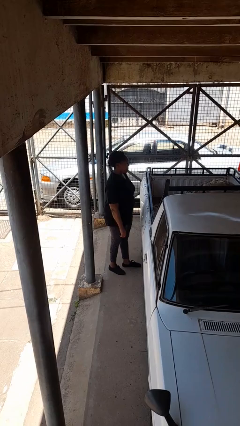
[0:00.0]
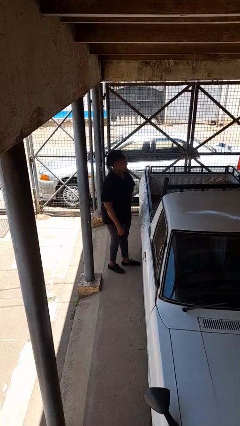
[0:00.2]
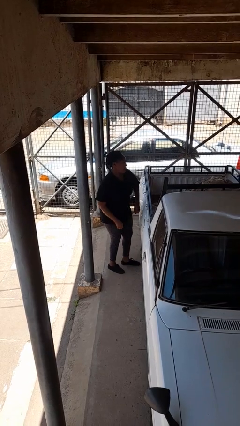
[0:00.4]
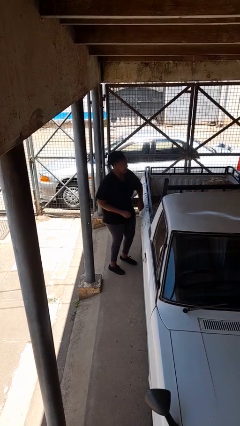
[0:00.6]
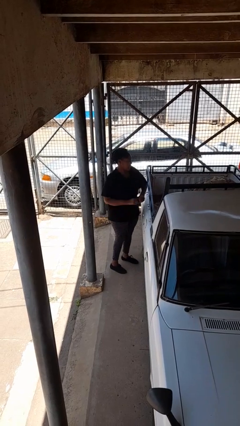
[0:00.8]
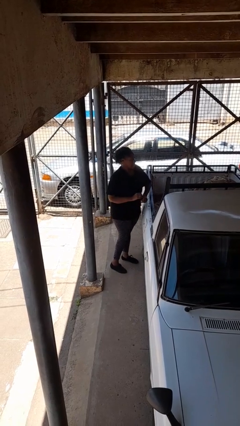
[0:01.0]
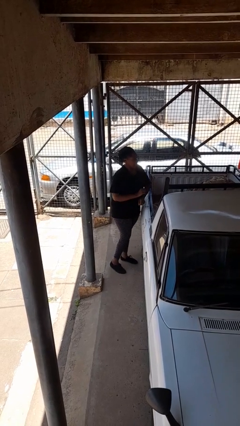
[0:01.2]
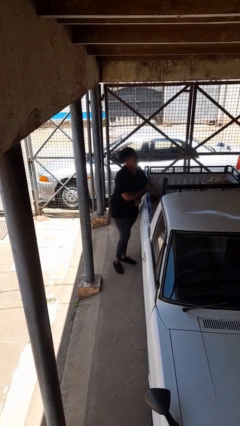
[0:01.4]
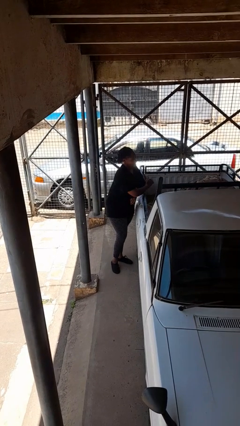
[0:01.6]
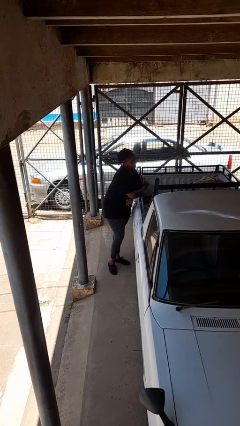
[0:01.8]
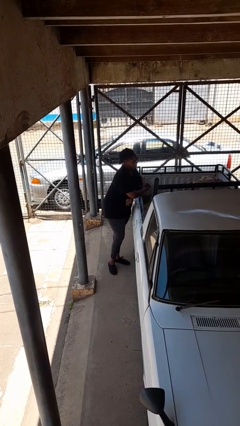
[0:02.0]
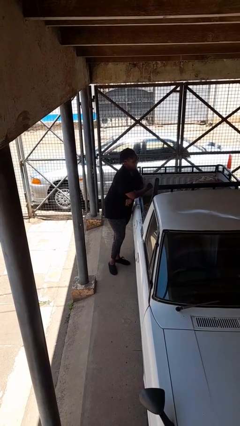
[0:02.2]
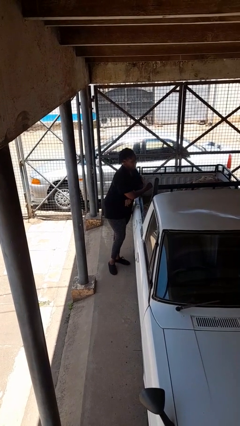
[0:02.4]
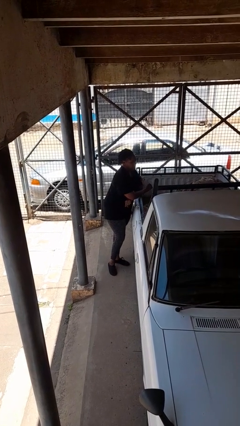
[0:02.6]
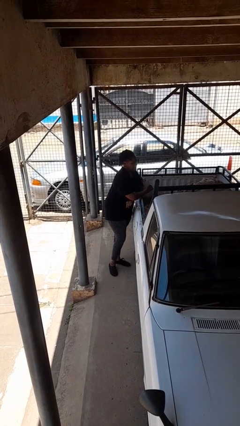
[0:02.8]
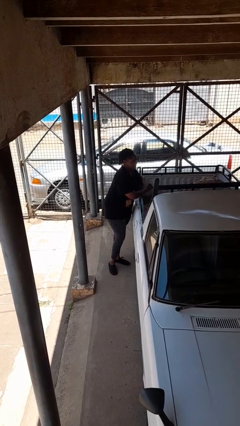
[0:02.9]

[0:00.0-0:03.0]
person leans against car

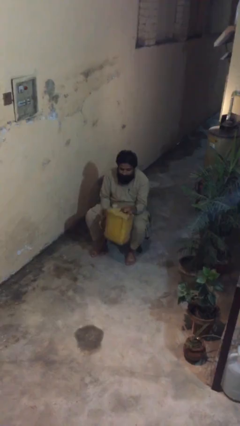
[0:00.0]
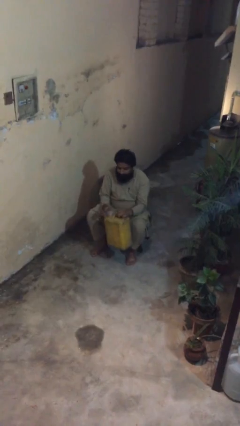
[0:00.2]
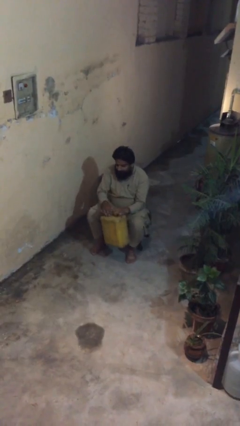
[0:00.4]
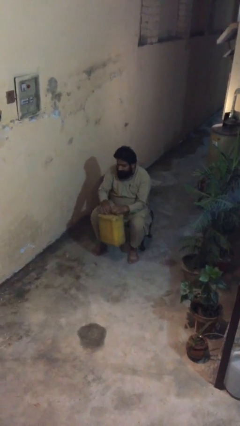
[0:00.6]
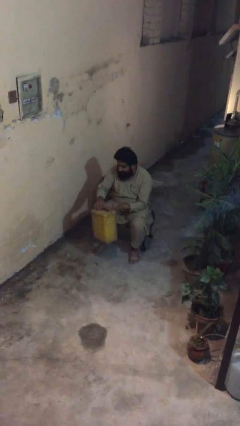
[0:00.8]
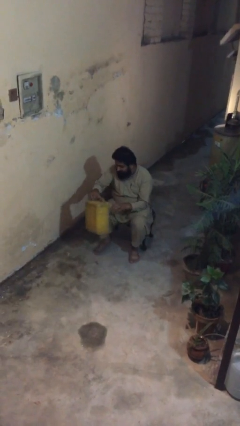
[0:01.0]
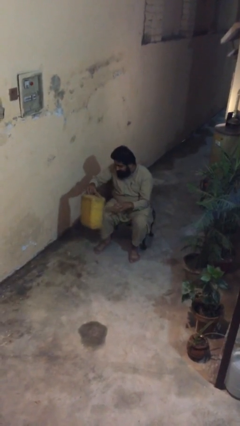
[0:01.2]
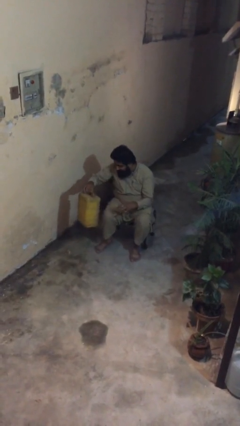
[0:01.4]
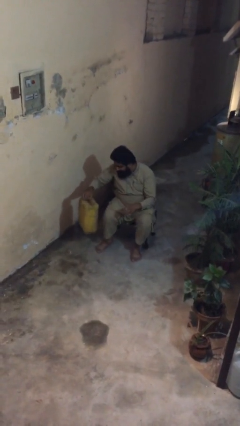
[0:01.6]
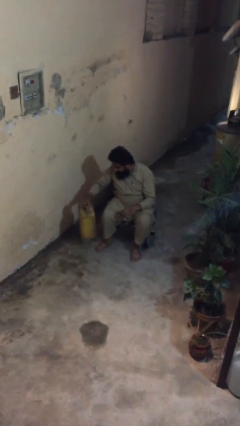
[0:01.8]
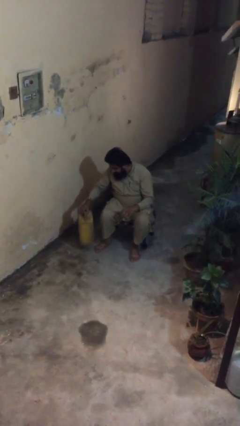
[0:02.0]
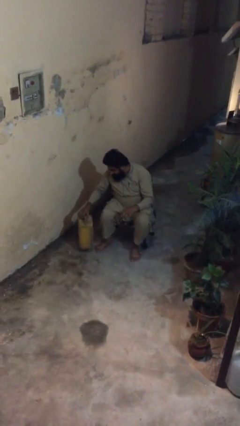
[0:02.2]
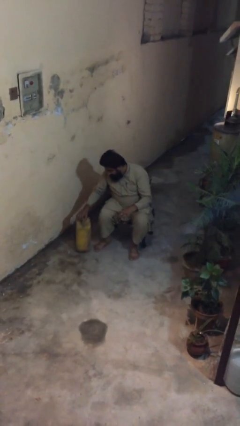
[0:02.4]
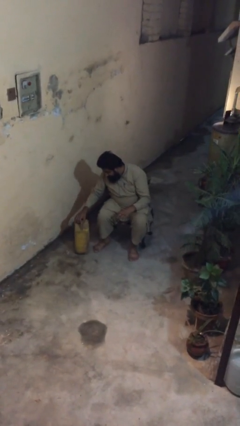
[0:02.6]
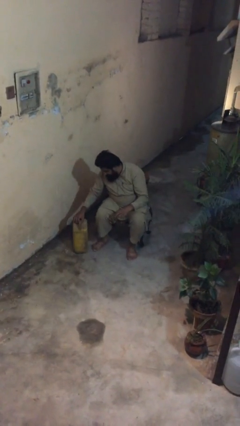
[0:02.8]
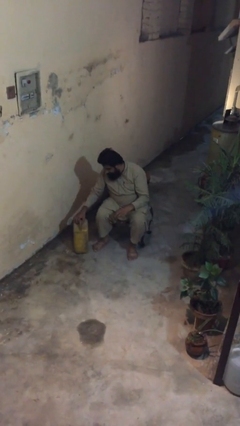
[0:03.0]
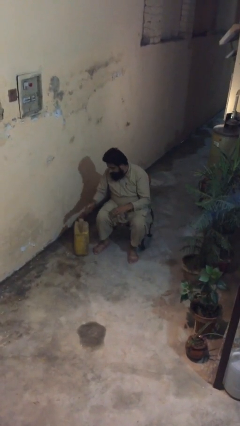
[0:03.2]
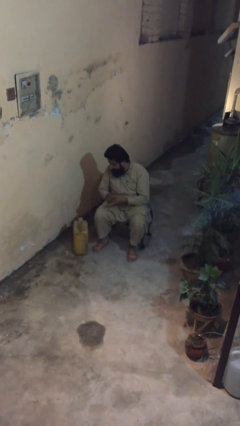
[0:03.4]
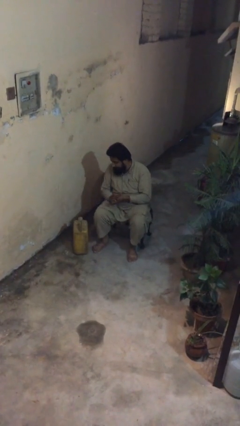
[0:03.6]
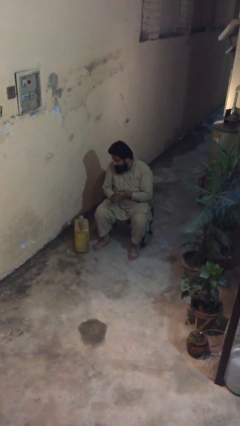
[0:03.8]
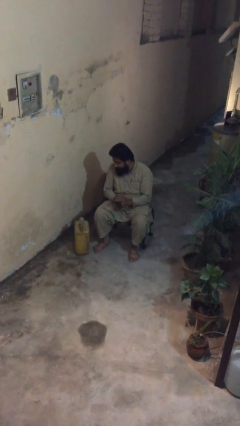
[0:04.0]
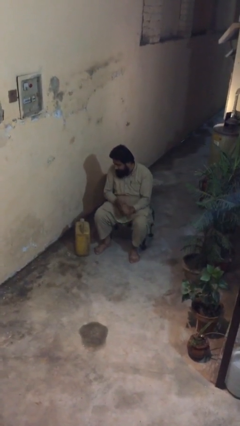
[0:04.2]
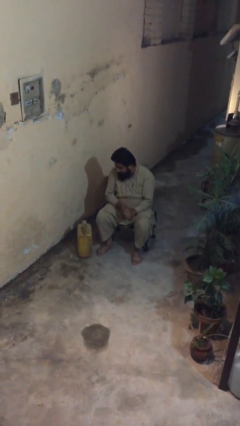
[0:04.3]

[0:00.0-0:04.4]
person puts down object on floor

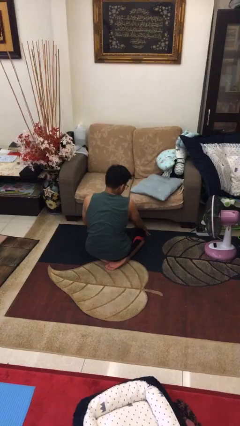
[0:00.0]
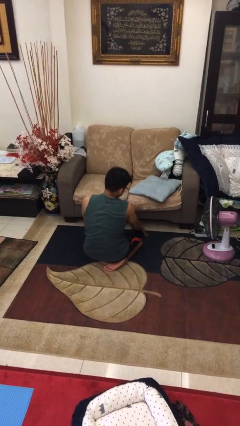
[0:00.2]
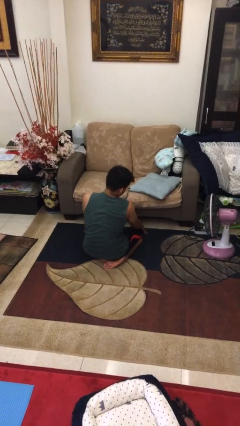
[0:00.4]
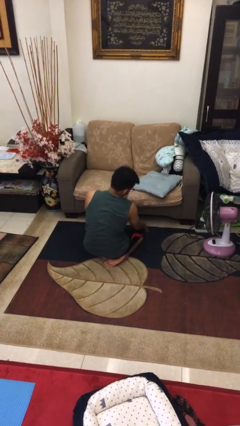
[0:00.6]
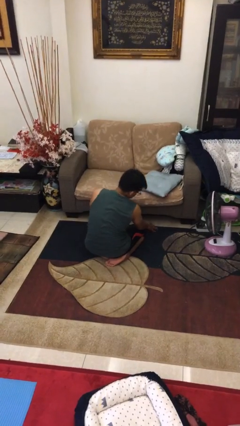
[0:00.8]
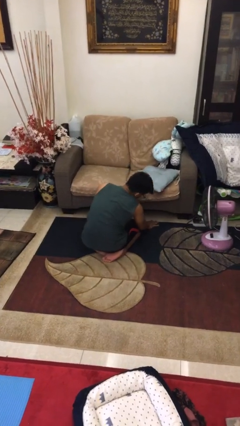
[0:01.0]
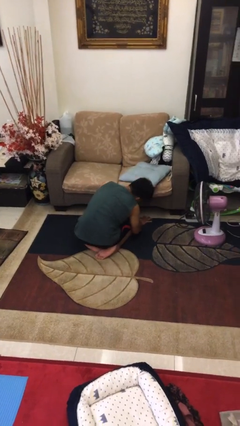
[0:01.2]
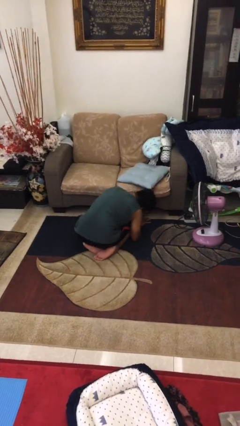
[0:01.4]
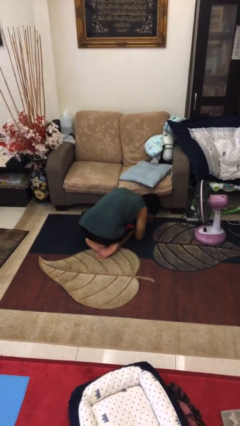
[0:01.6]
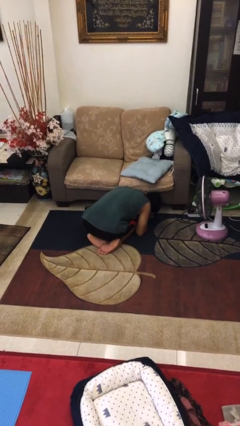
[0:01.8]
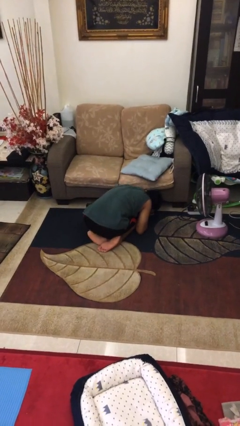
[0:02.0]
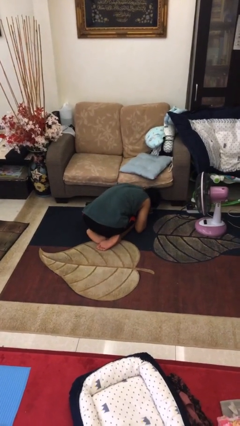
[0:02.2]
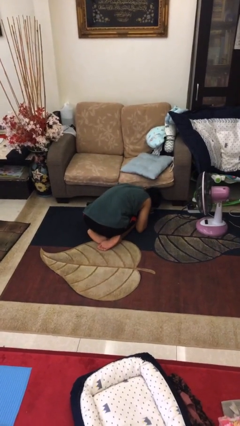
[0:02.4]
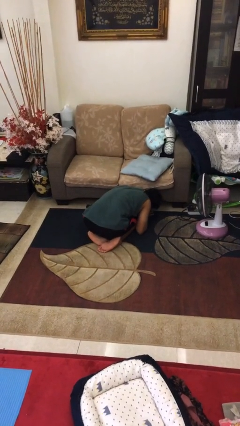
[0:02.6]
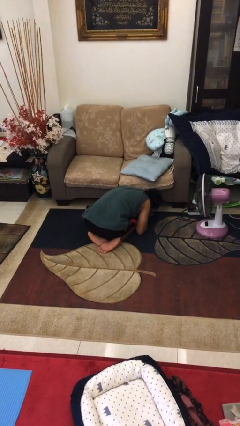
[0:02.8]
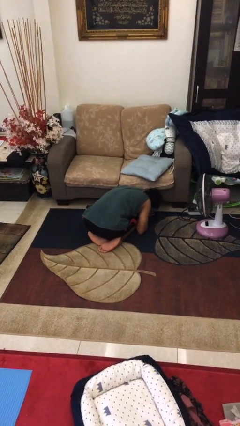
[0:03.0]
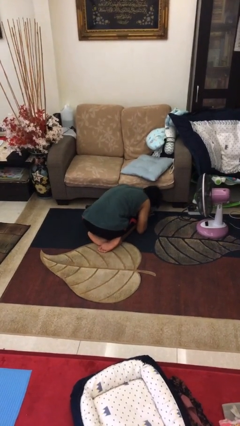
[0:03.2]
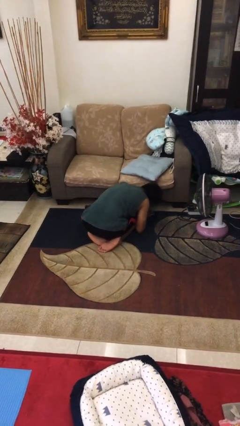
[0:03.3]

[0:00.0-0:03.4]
person searches under couch

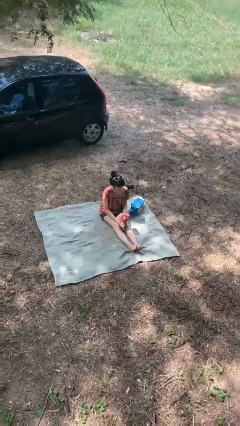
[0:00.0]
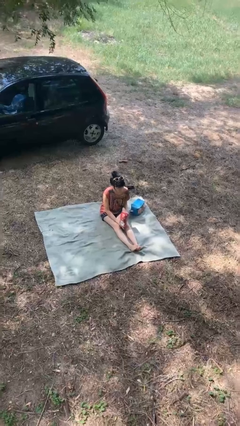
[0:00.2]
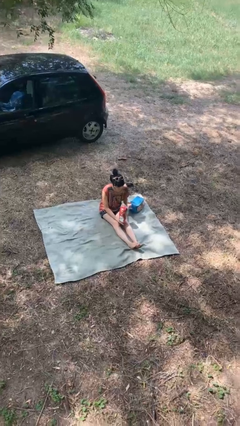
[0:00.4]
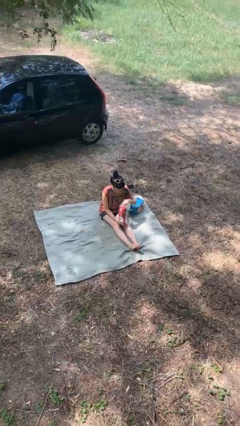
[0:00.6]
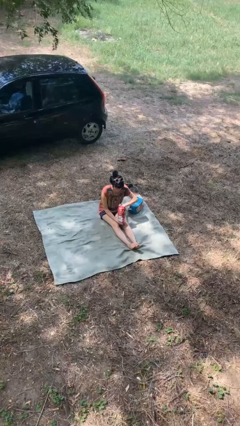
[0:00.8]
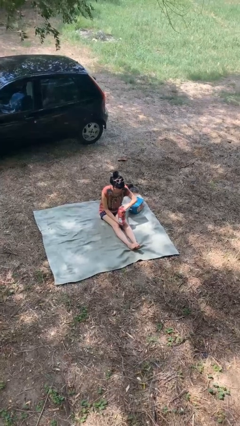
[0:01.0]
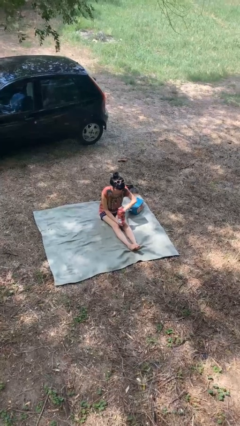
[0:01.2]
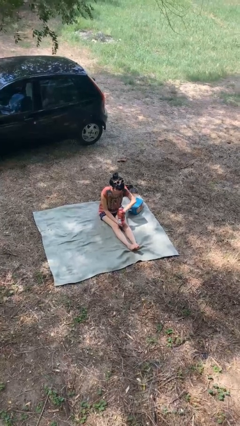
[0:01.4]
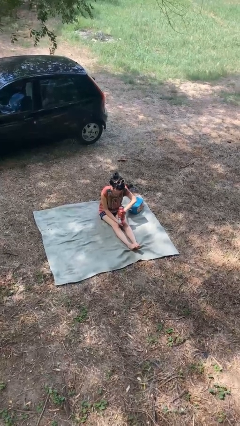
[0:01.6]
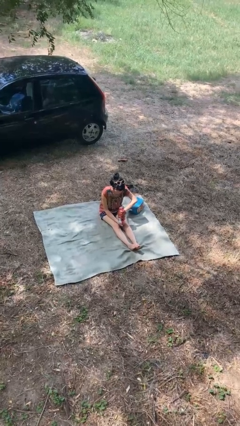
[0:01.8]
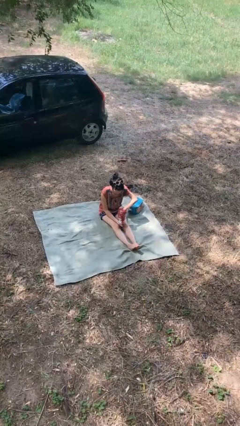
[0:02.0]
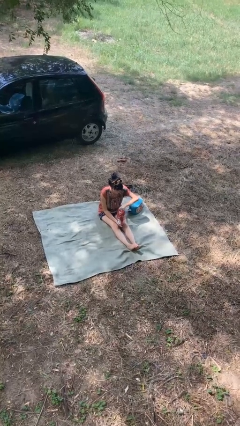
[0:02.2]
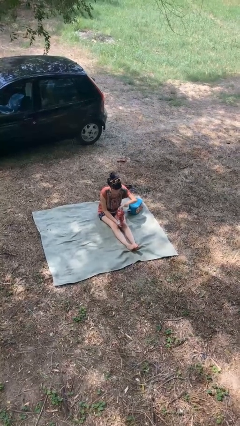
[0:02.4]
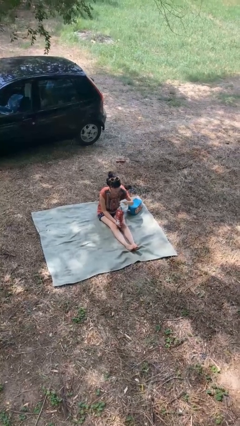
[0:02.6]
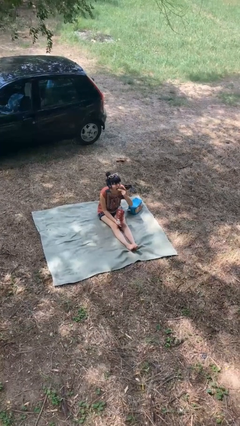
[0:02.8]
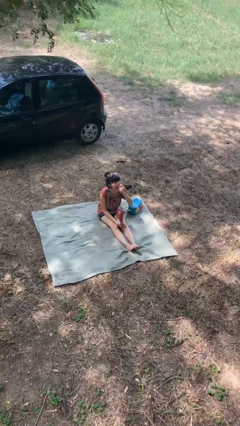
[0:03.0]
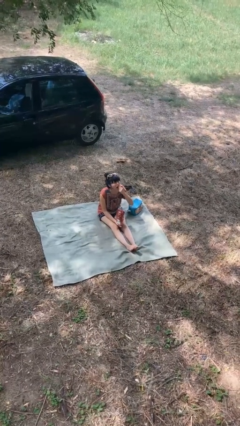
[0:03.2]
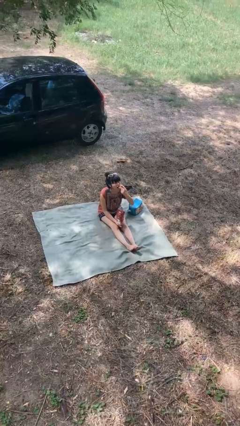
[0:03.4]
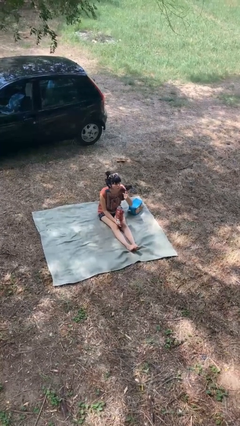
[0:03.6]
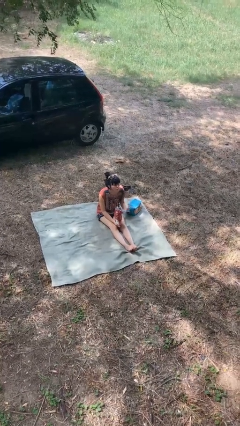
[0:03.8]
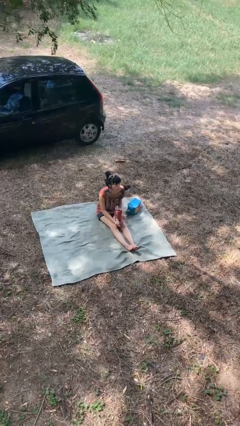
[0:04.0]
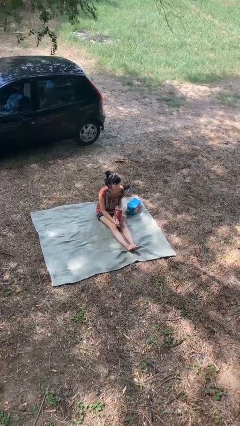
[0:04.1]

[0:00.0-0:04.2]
person eats snack from bag

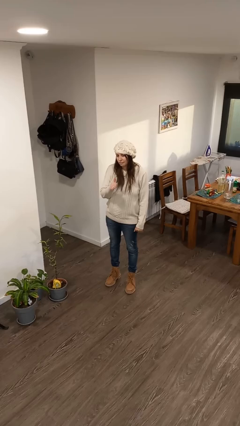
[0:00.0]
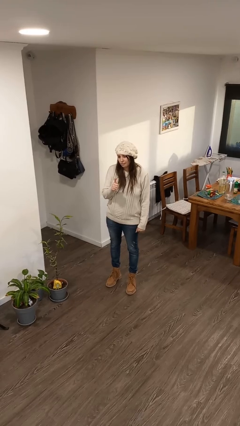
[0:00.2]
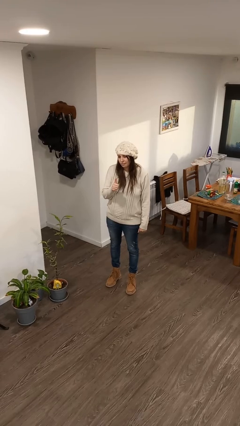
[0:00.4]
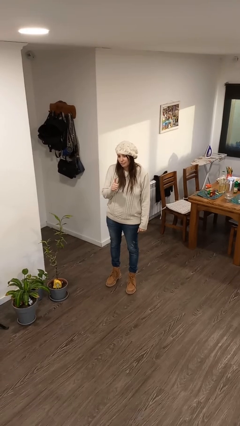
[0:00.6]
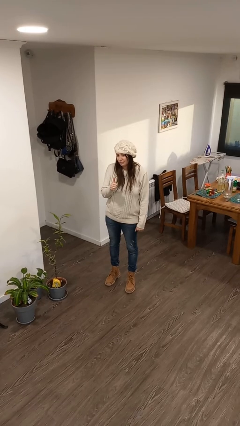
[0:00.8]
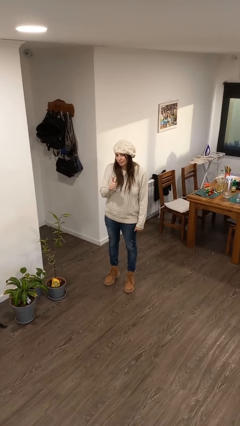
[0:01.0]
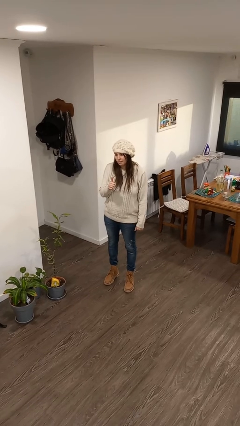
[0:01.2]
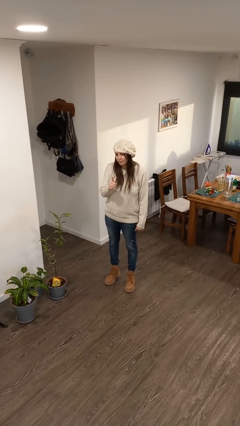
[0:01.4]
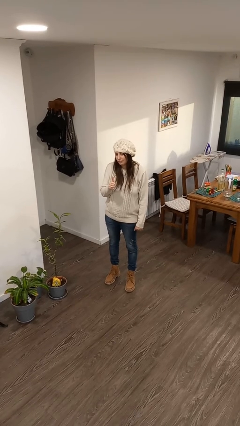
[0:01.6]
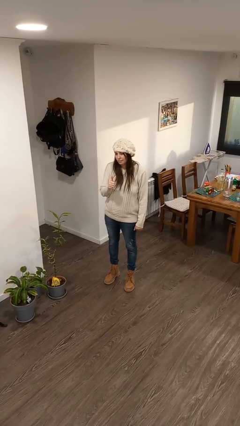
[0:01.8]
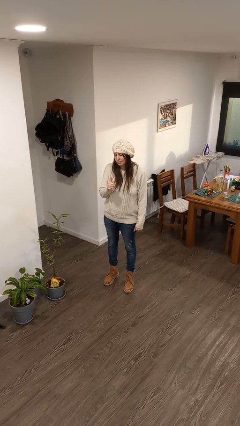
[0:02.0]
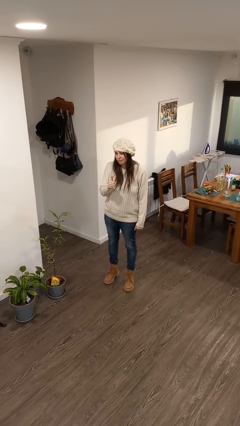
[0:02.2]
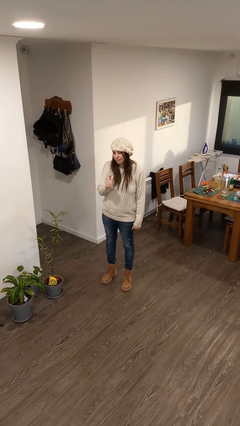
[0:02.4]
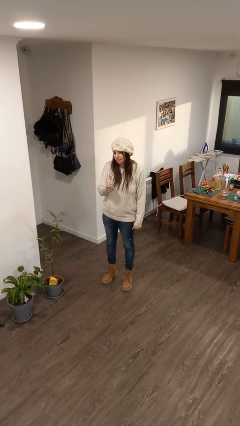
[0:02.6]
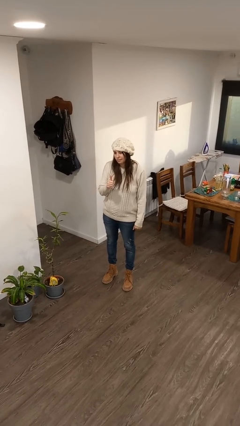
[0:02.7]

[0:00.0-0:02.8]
person gestures thumbs up
